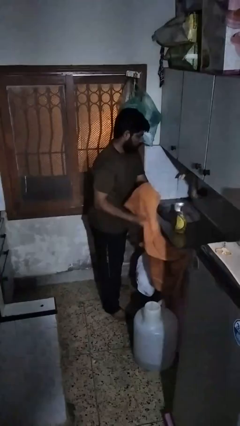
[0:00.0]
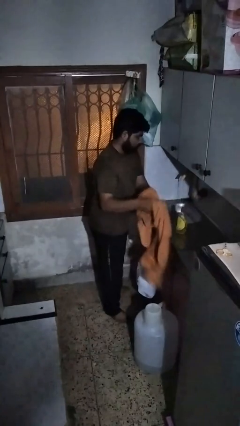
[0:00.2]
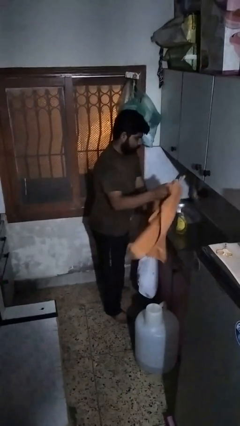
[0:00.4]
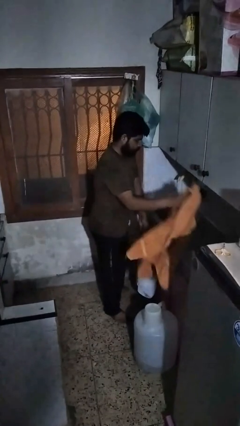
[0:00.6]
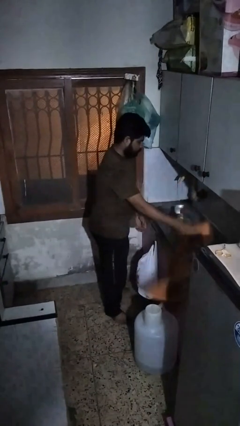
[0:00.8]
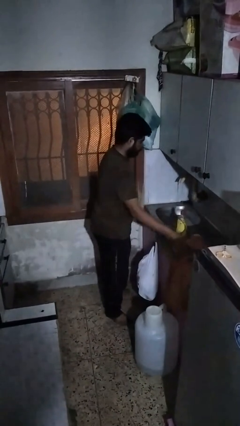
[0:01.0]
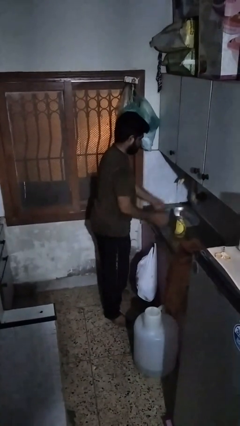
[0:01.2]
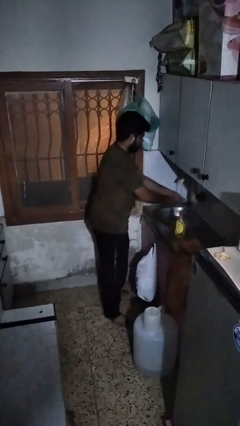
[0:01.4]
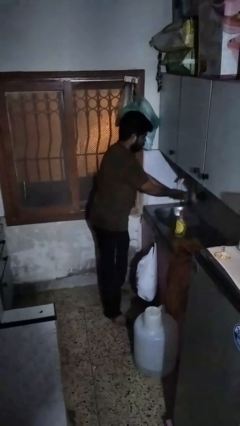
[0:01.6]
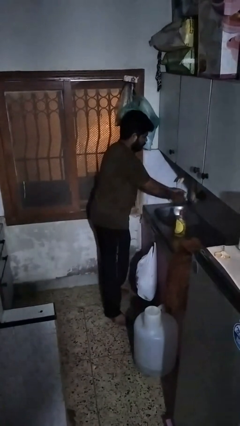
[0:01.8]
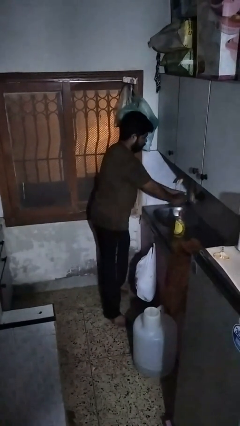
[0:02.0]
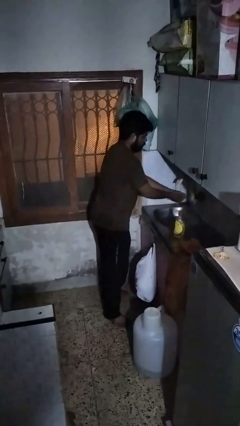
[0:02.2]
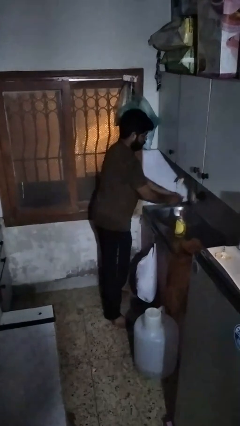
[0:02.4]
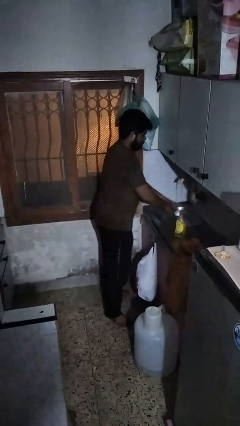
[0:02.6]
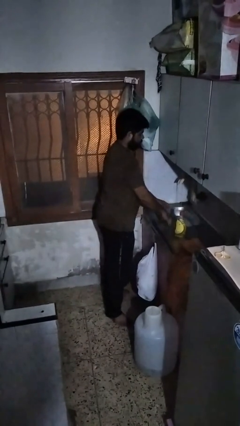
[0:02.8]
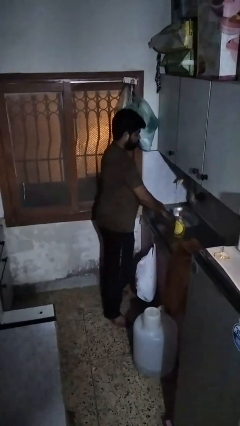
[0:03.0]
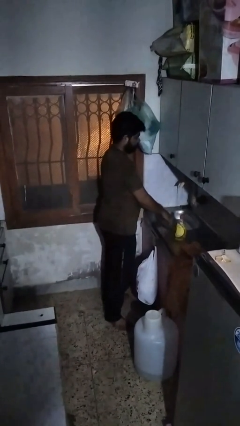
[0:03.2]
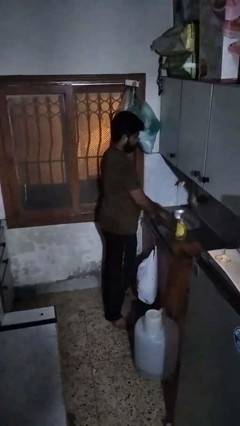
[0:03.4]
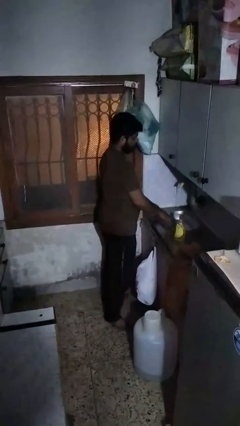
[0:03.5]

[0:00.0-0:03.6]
person washes hands

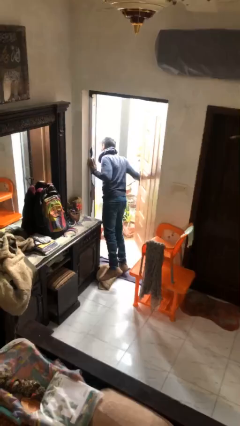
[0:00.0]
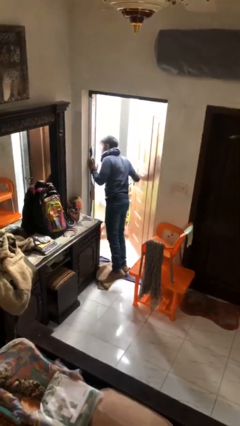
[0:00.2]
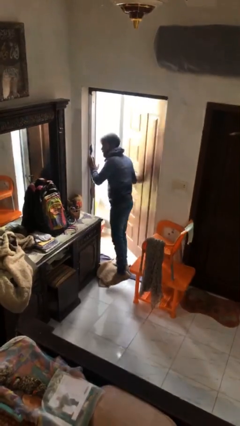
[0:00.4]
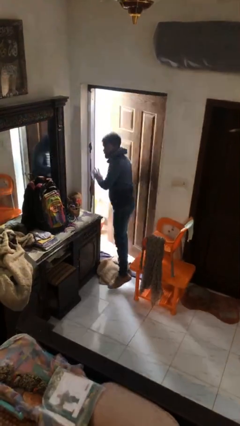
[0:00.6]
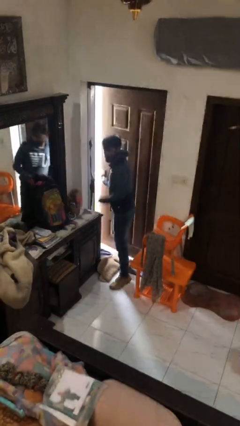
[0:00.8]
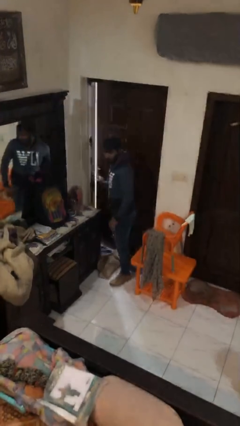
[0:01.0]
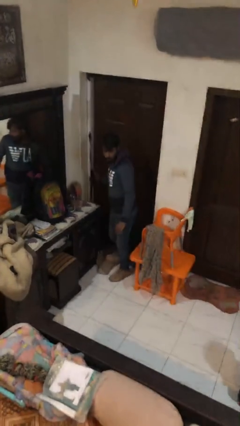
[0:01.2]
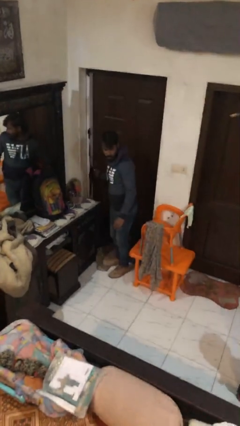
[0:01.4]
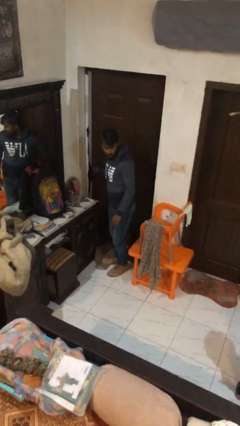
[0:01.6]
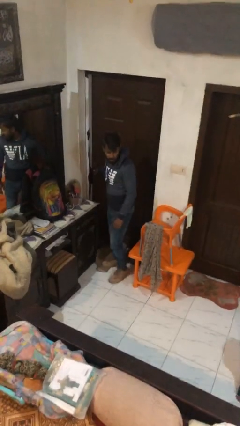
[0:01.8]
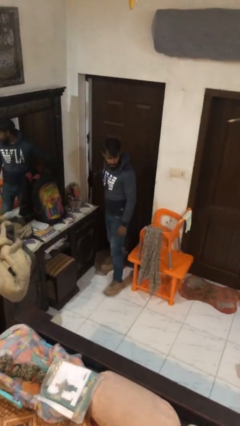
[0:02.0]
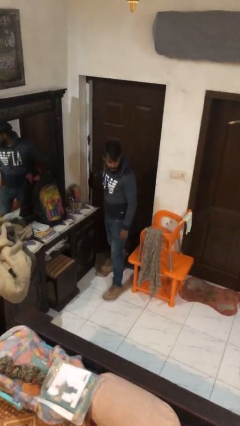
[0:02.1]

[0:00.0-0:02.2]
person closes facility door

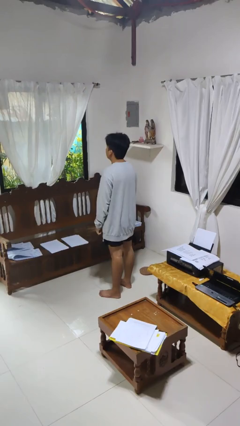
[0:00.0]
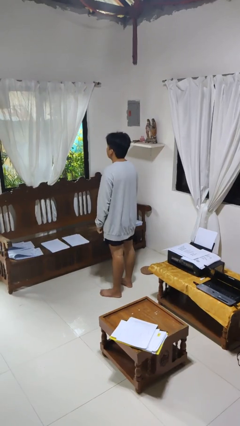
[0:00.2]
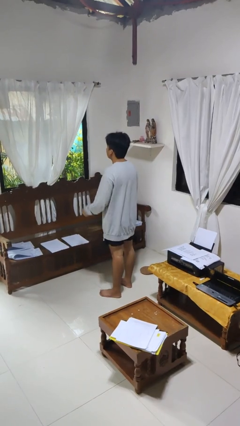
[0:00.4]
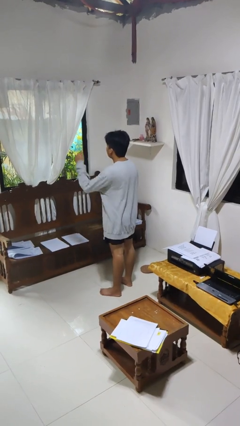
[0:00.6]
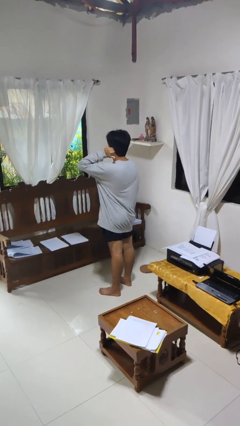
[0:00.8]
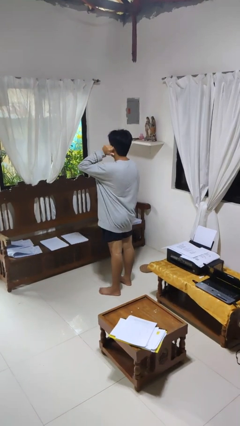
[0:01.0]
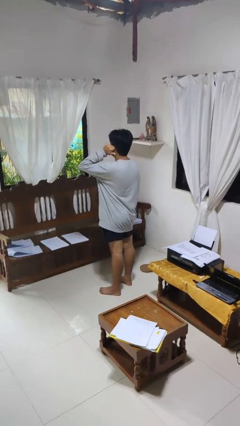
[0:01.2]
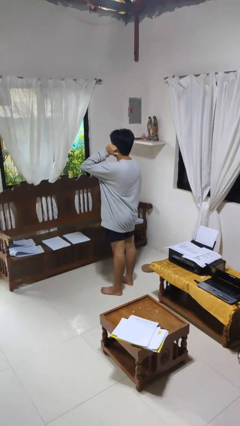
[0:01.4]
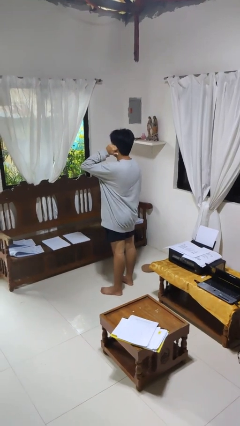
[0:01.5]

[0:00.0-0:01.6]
person gestures behind me

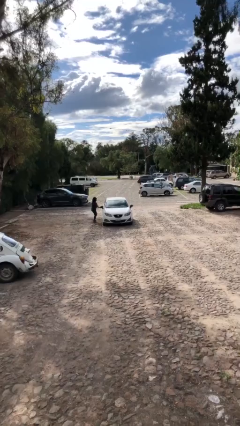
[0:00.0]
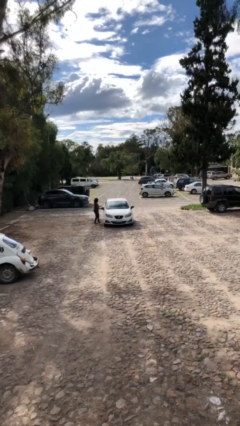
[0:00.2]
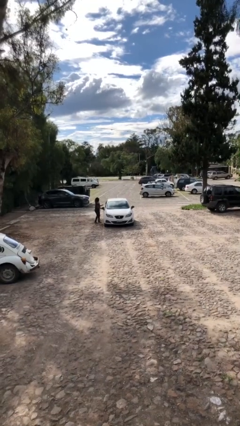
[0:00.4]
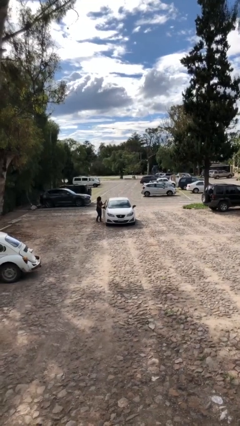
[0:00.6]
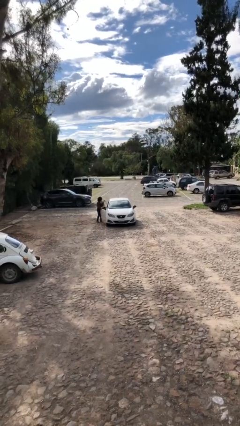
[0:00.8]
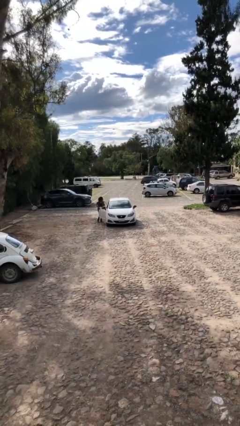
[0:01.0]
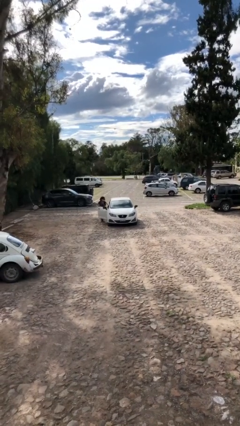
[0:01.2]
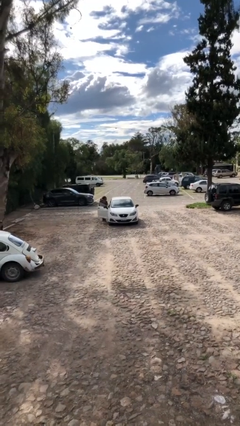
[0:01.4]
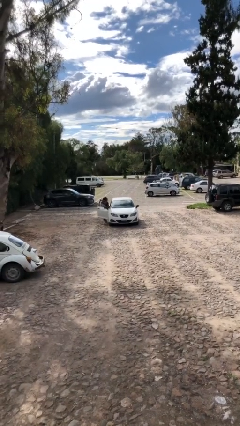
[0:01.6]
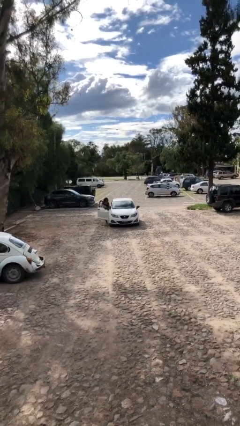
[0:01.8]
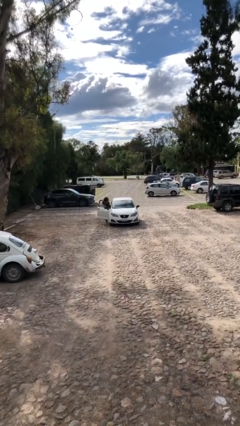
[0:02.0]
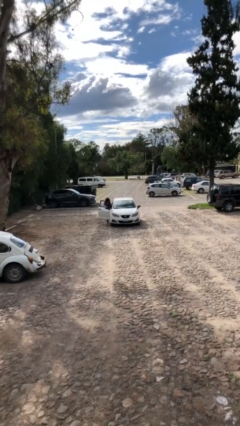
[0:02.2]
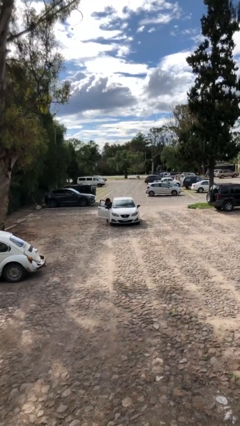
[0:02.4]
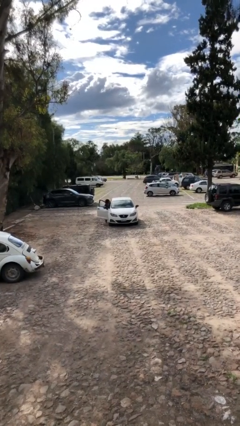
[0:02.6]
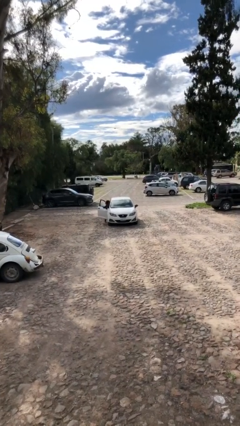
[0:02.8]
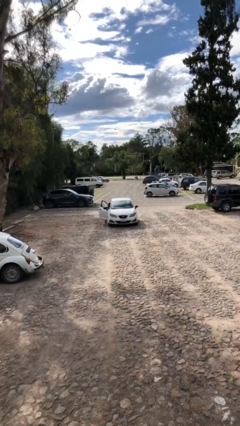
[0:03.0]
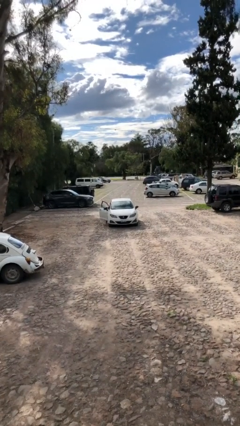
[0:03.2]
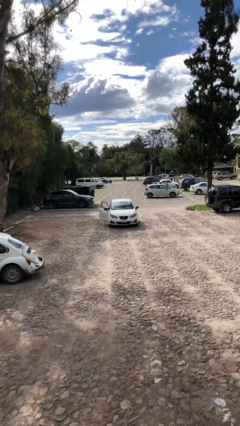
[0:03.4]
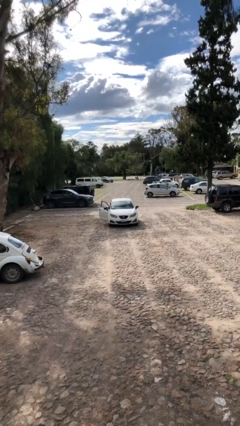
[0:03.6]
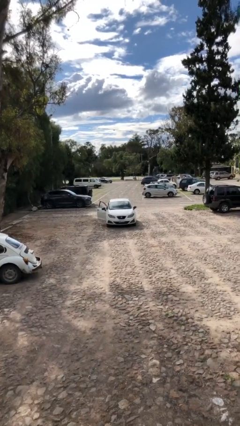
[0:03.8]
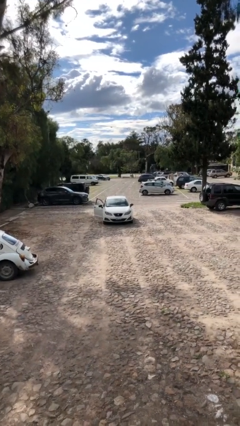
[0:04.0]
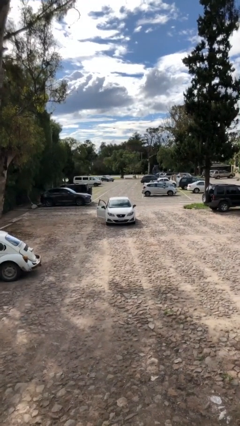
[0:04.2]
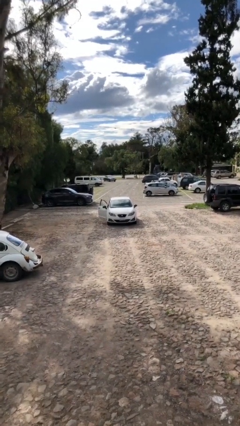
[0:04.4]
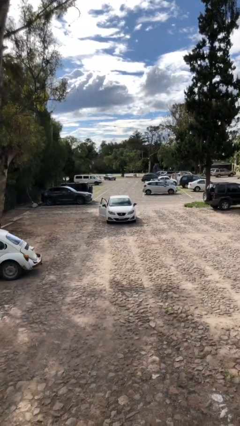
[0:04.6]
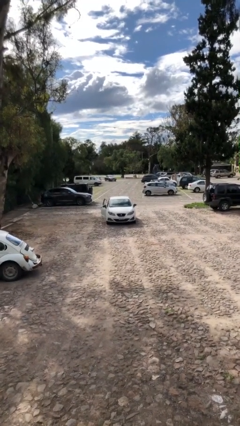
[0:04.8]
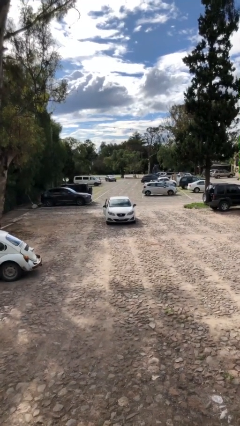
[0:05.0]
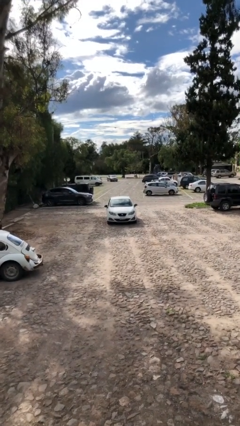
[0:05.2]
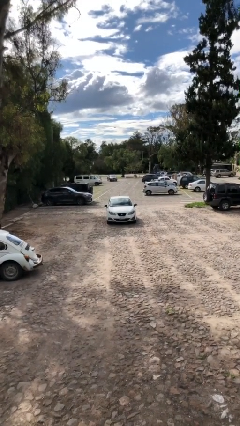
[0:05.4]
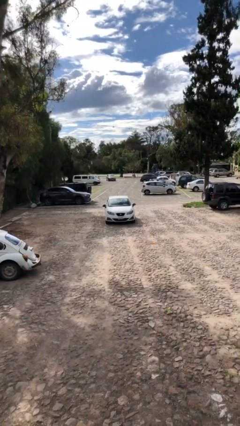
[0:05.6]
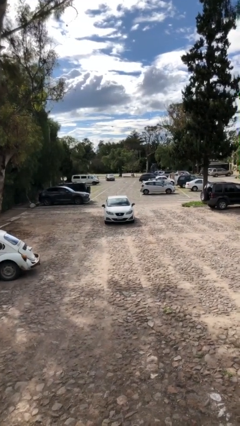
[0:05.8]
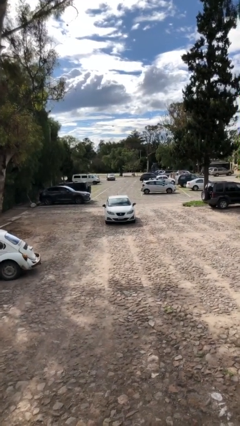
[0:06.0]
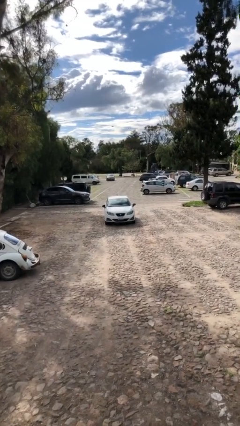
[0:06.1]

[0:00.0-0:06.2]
car picks up person

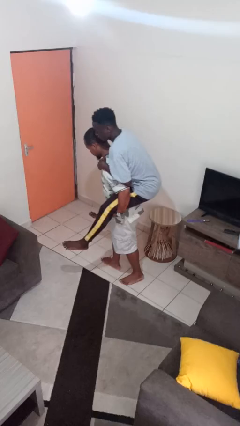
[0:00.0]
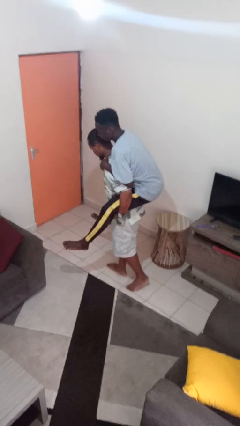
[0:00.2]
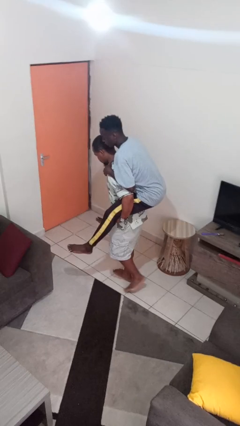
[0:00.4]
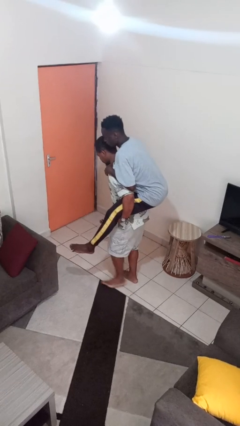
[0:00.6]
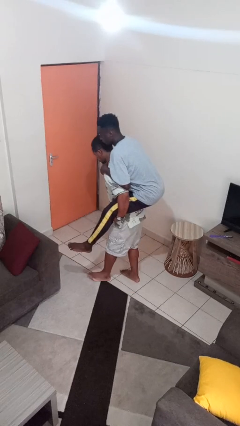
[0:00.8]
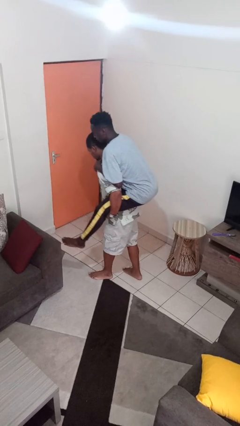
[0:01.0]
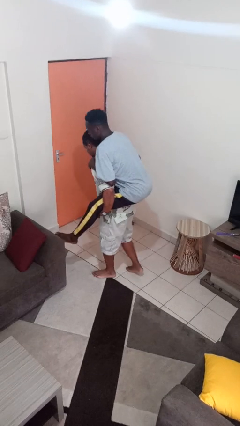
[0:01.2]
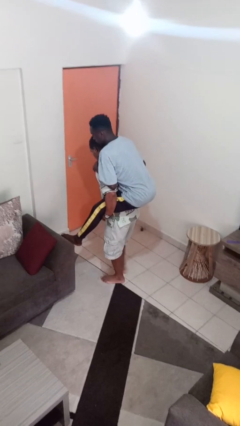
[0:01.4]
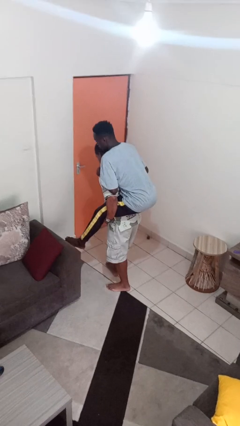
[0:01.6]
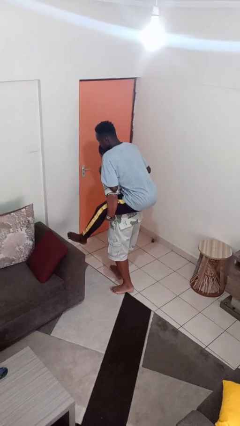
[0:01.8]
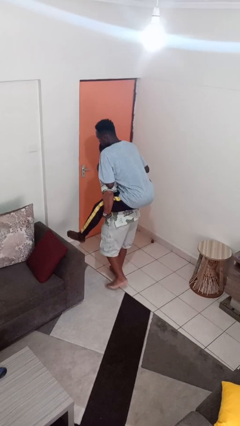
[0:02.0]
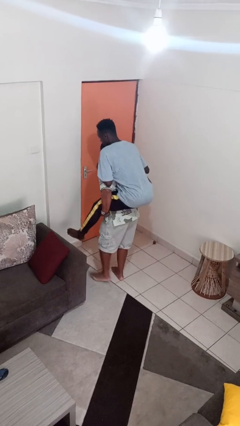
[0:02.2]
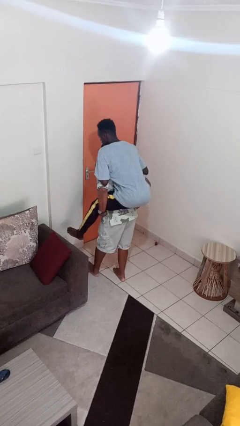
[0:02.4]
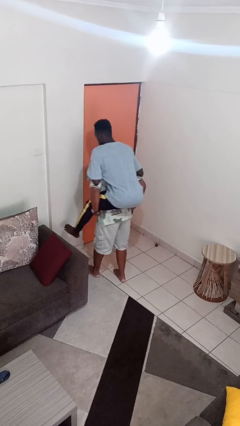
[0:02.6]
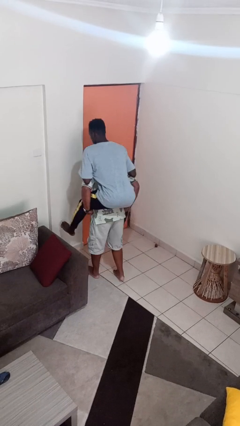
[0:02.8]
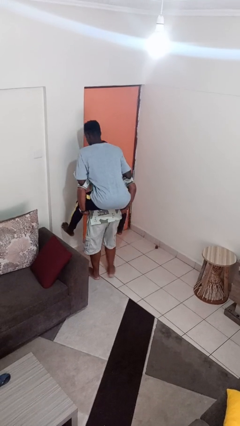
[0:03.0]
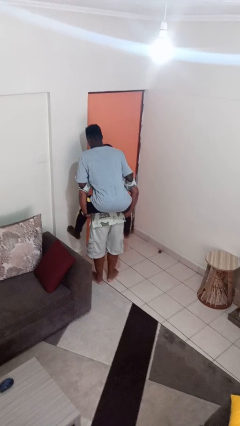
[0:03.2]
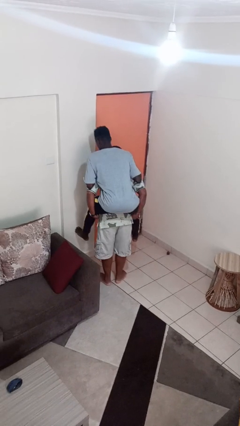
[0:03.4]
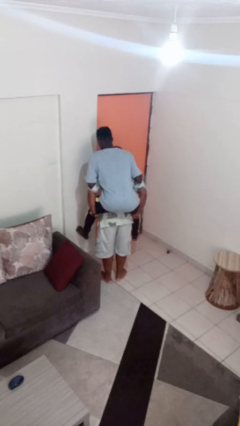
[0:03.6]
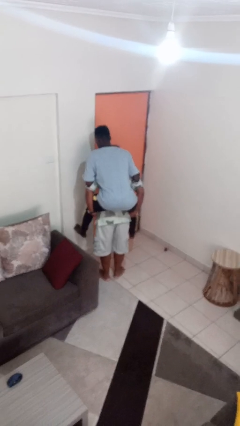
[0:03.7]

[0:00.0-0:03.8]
person carries person on back

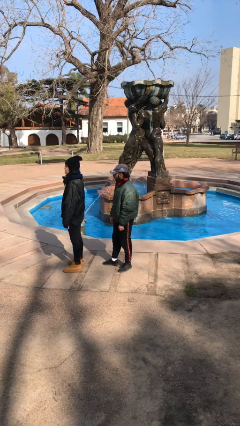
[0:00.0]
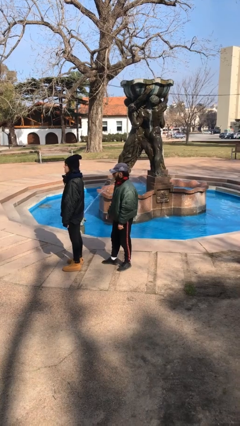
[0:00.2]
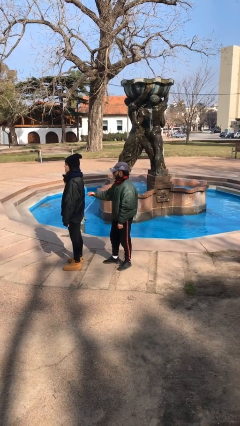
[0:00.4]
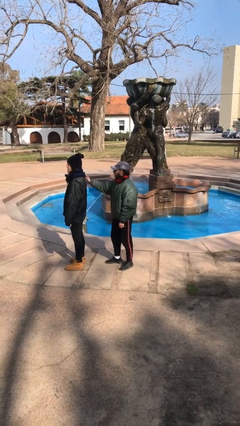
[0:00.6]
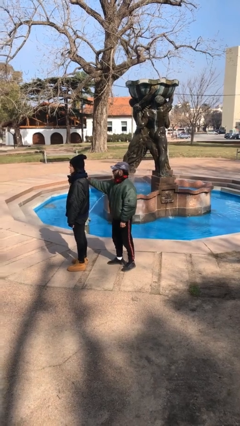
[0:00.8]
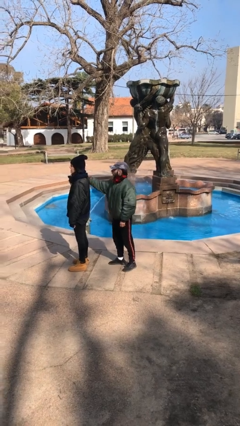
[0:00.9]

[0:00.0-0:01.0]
person grabs person by shoulder
